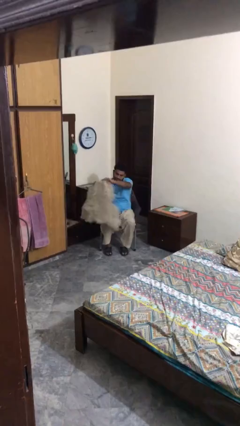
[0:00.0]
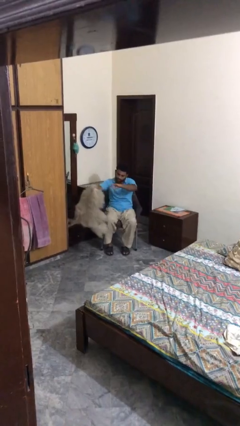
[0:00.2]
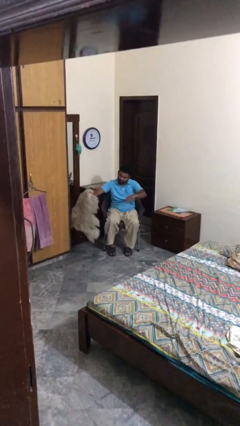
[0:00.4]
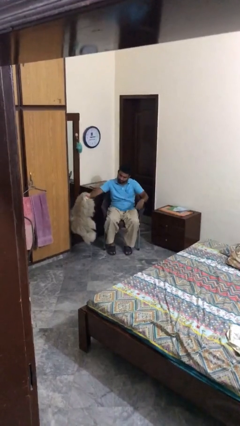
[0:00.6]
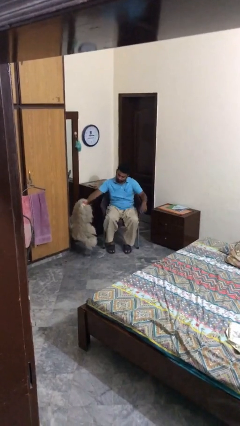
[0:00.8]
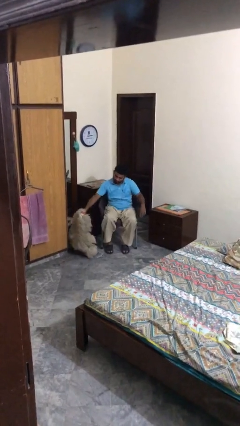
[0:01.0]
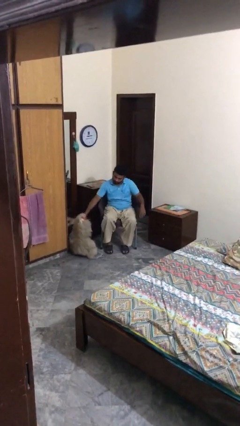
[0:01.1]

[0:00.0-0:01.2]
person puts down object on floor

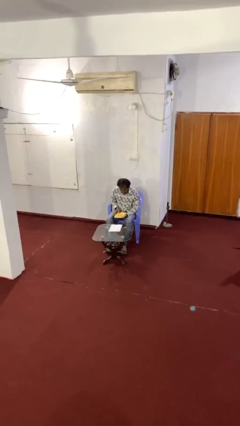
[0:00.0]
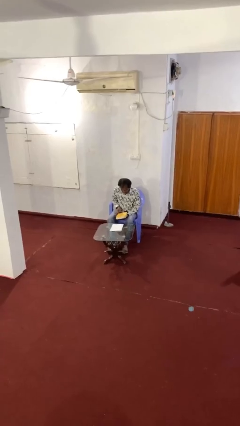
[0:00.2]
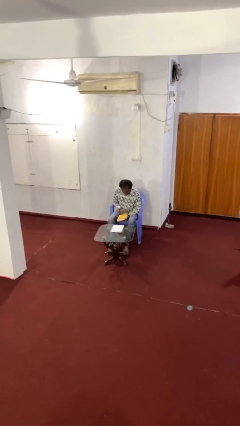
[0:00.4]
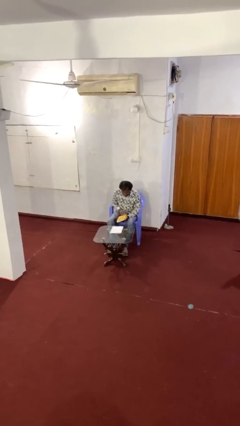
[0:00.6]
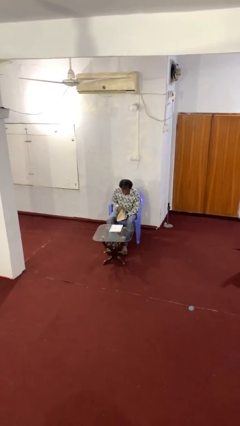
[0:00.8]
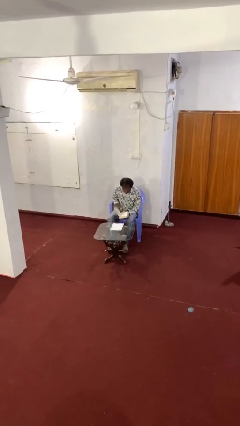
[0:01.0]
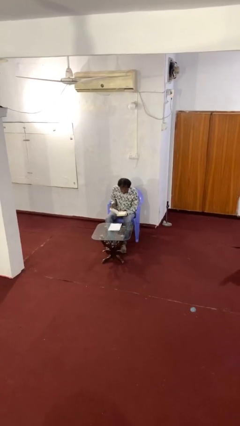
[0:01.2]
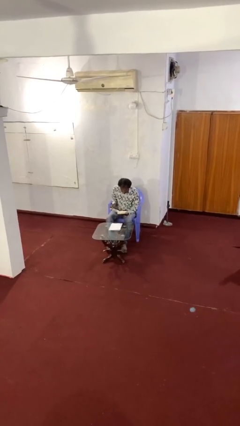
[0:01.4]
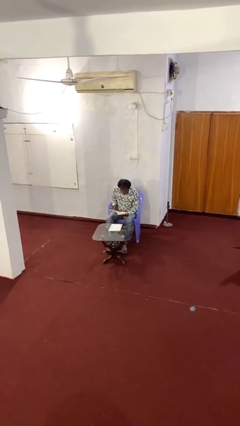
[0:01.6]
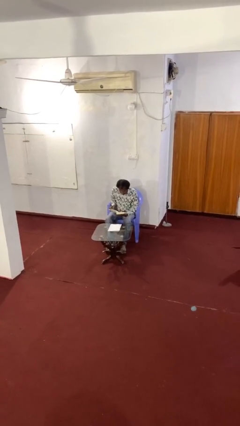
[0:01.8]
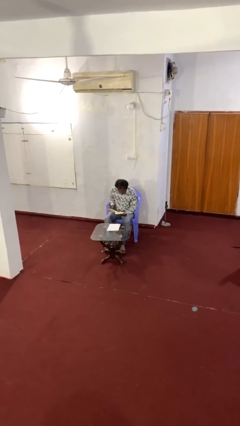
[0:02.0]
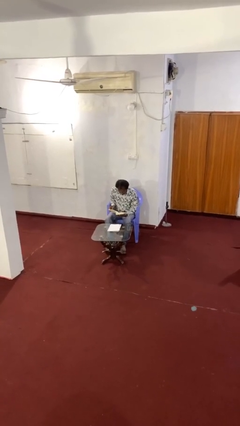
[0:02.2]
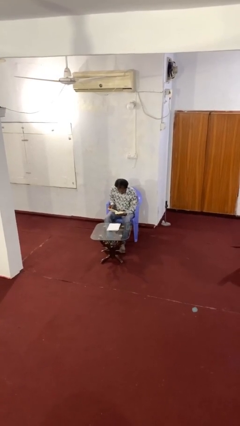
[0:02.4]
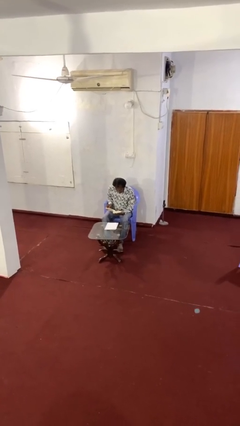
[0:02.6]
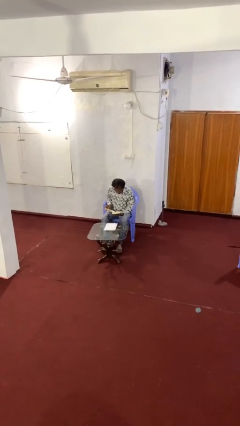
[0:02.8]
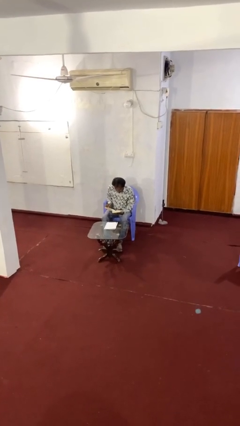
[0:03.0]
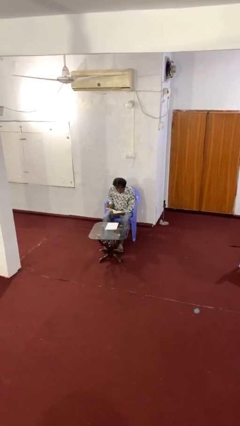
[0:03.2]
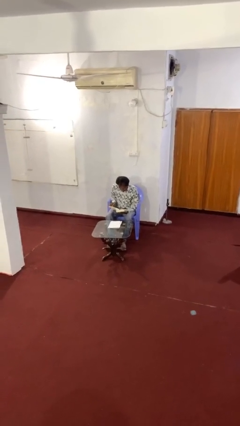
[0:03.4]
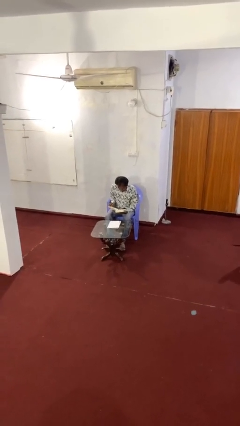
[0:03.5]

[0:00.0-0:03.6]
person reads document

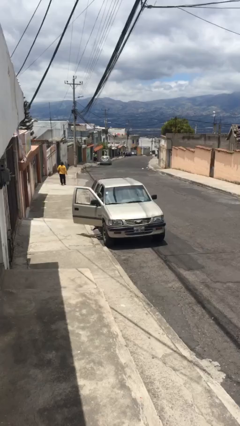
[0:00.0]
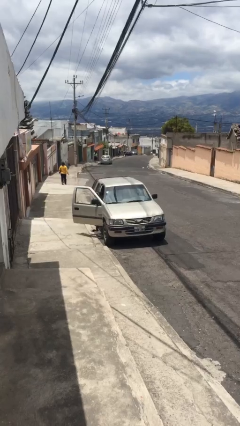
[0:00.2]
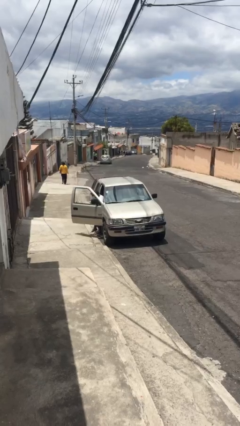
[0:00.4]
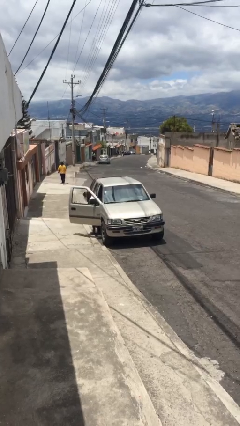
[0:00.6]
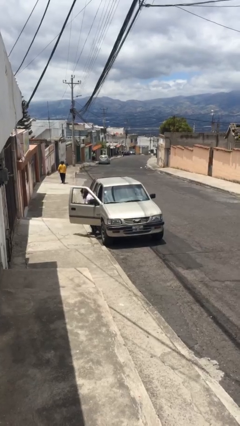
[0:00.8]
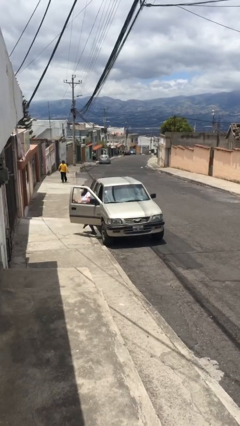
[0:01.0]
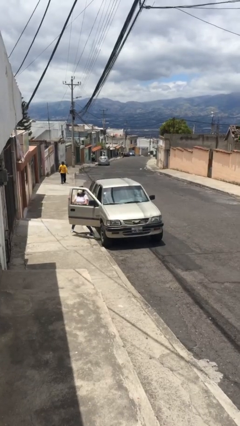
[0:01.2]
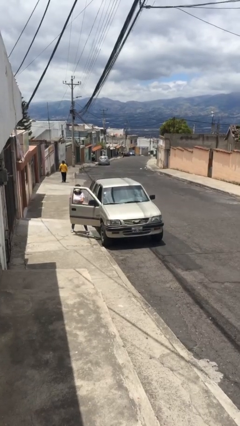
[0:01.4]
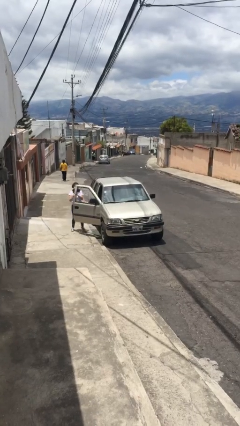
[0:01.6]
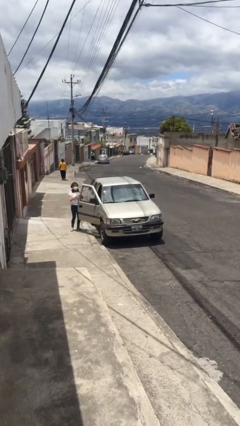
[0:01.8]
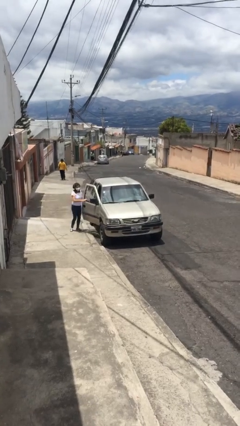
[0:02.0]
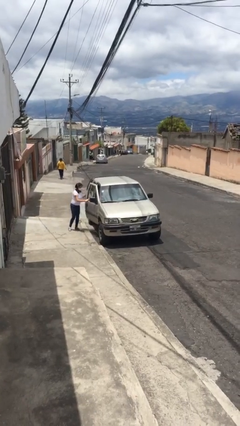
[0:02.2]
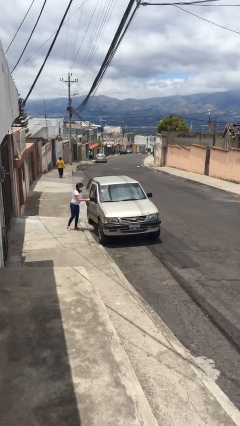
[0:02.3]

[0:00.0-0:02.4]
car drops off person

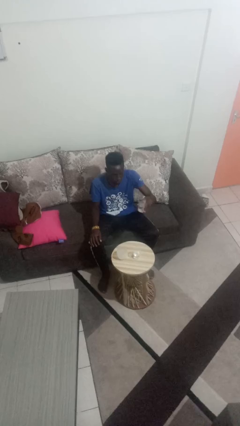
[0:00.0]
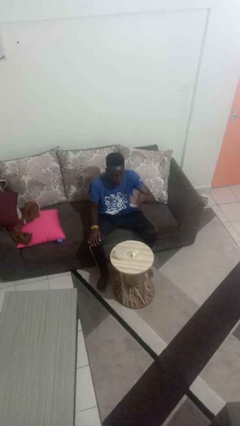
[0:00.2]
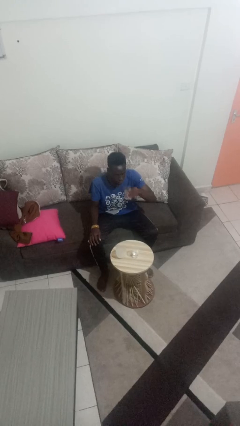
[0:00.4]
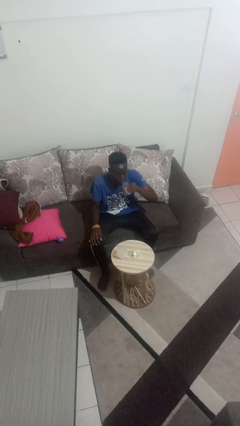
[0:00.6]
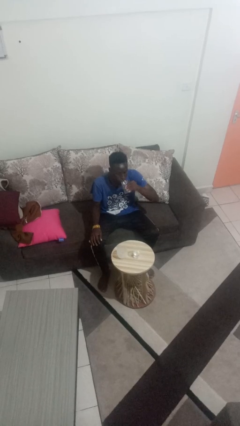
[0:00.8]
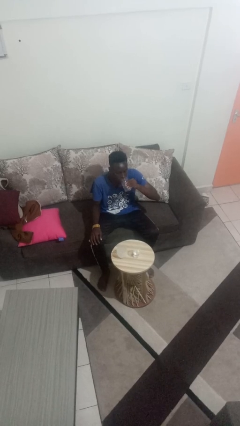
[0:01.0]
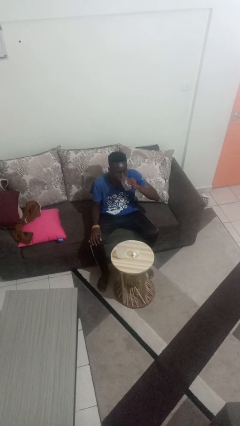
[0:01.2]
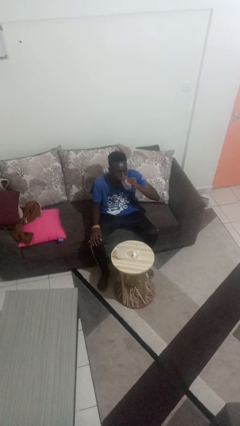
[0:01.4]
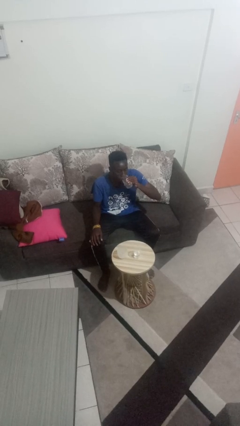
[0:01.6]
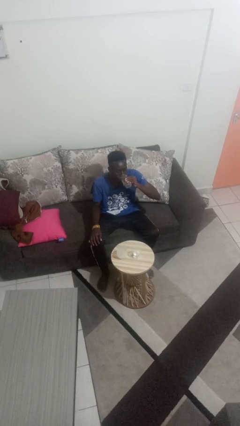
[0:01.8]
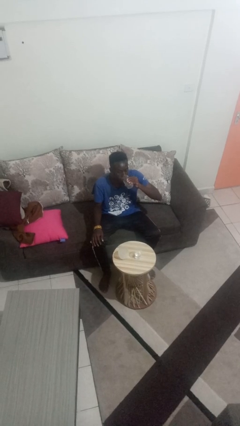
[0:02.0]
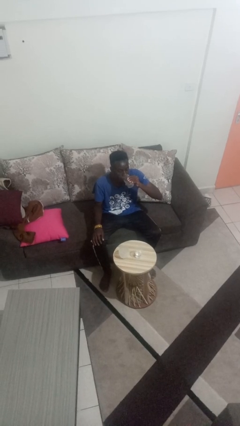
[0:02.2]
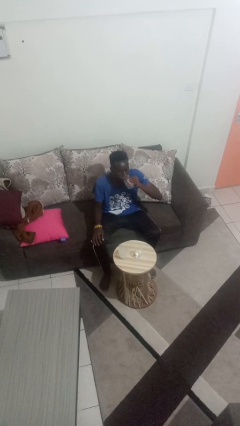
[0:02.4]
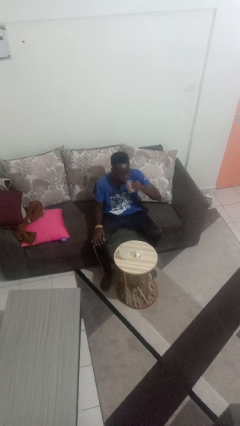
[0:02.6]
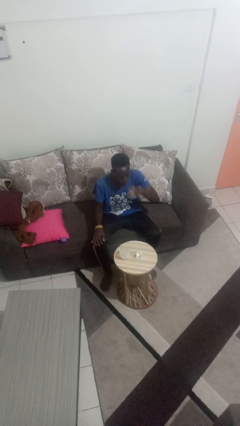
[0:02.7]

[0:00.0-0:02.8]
person drinks from shotglass

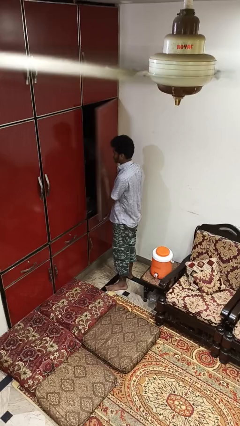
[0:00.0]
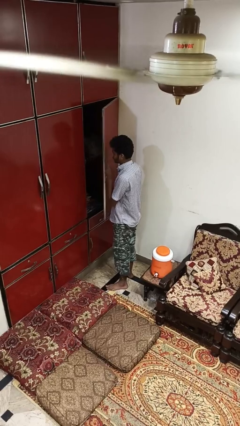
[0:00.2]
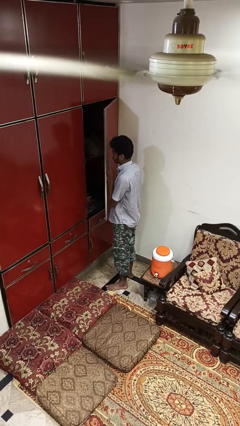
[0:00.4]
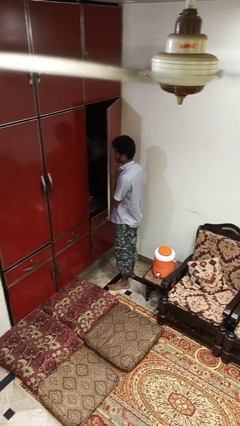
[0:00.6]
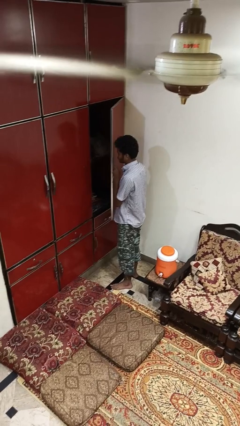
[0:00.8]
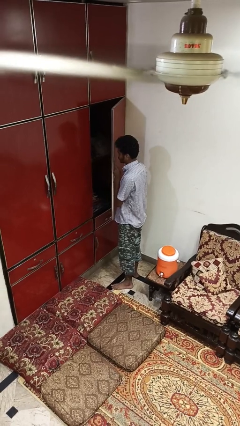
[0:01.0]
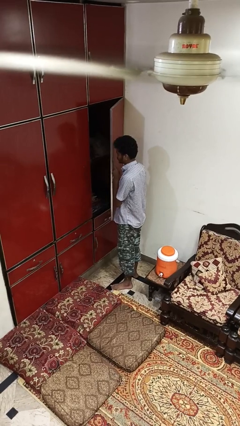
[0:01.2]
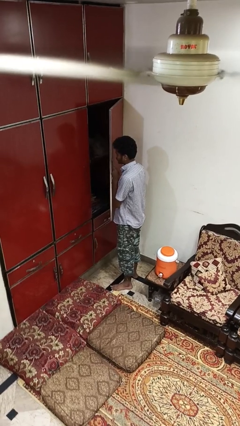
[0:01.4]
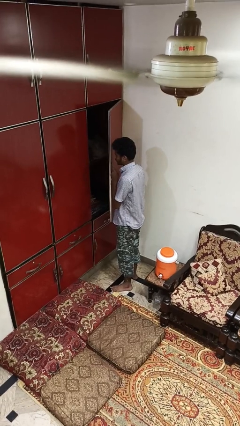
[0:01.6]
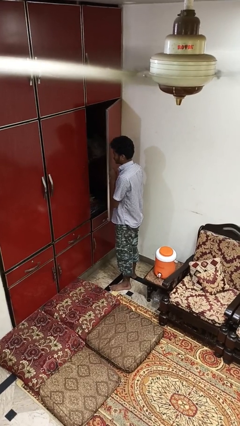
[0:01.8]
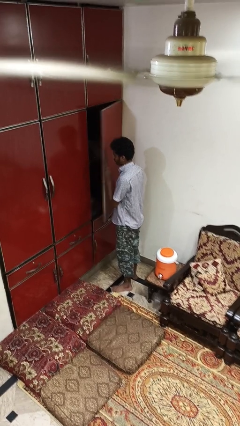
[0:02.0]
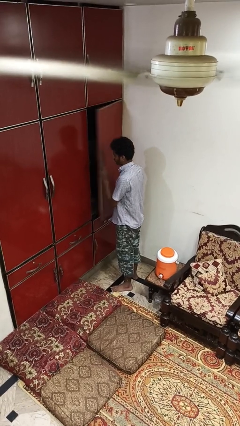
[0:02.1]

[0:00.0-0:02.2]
person closes cabinet

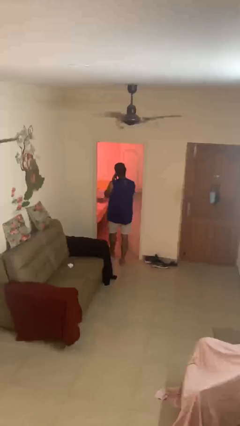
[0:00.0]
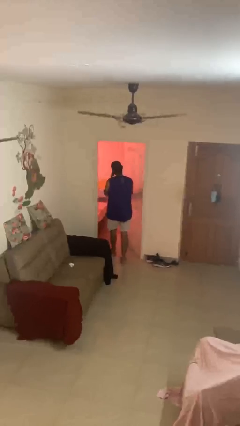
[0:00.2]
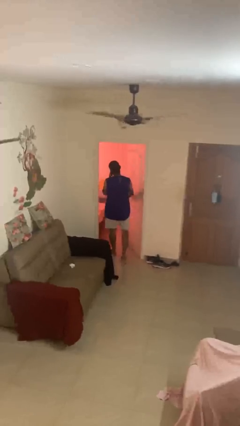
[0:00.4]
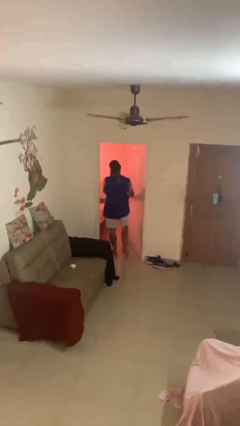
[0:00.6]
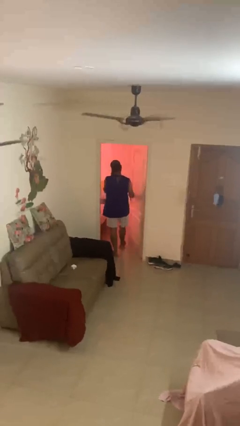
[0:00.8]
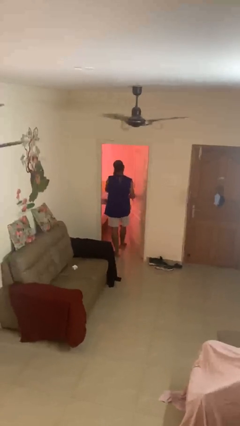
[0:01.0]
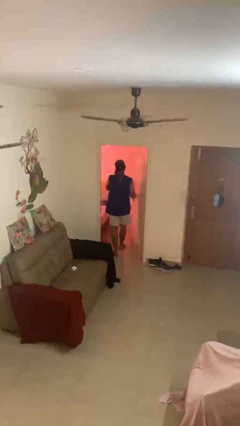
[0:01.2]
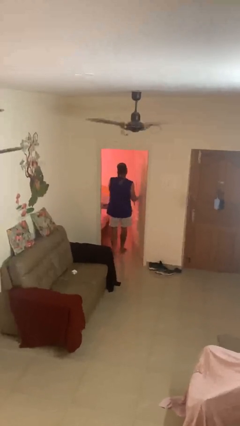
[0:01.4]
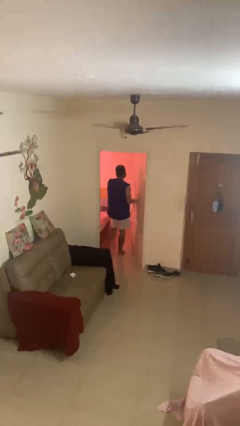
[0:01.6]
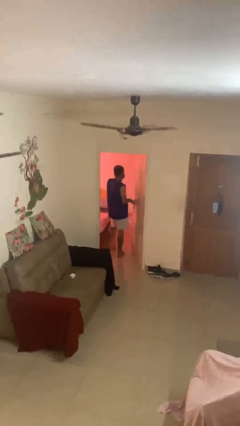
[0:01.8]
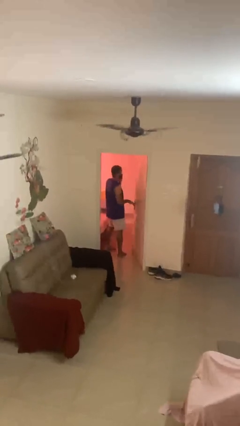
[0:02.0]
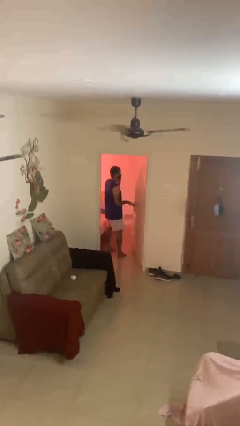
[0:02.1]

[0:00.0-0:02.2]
person exits scene through structure

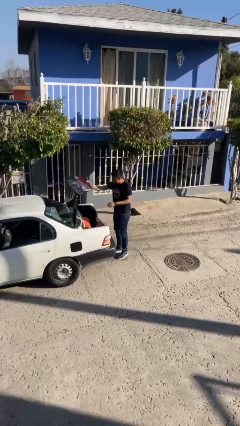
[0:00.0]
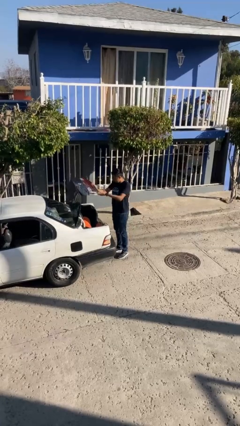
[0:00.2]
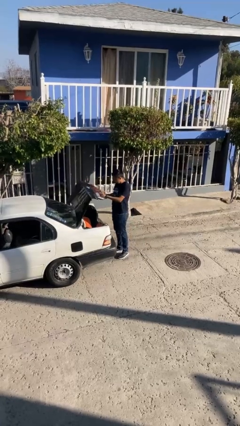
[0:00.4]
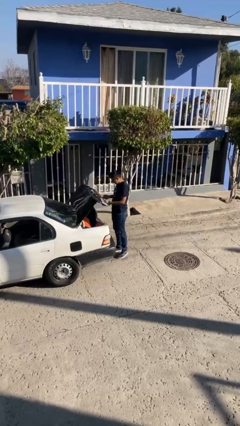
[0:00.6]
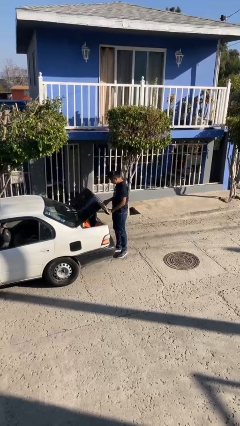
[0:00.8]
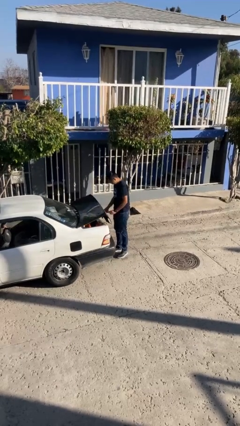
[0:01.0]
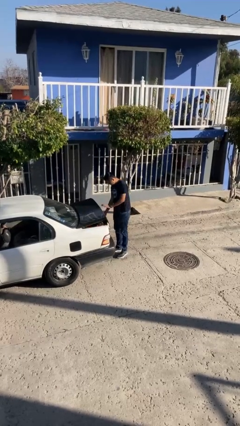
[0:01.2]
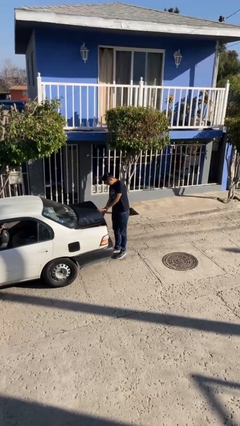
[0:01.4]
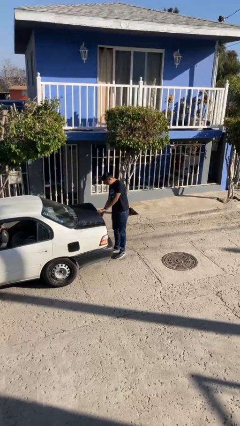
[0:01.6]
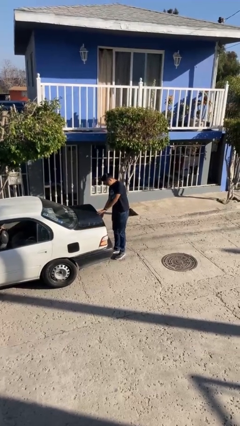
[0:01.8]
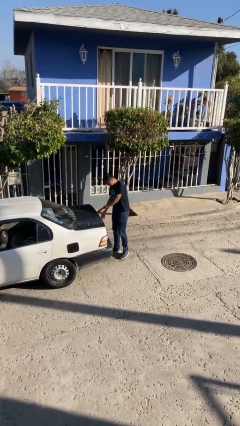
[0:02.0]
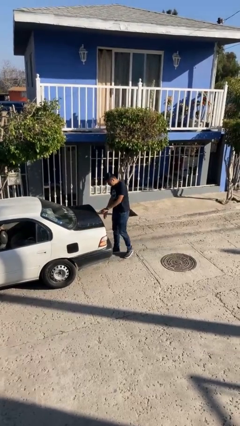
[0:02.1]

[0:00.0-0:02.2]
person closes car trunk

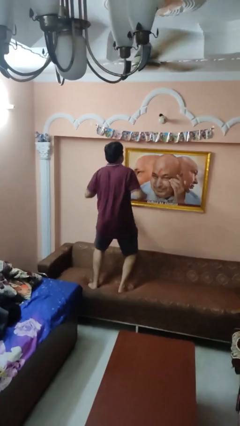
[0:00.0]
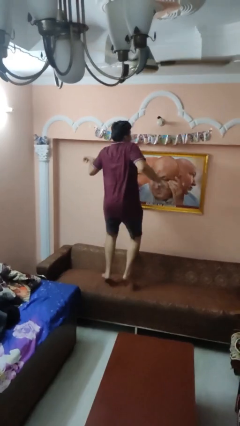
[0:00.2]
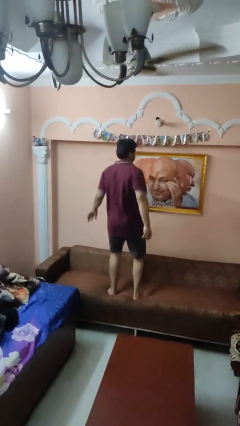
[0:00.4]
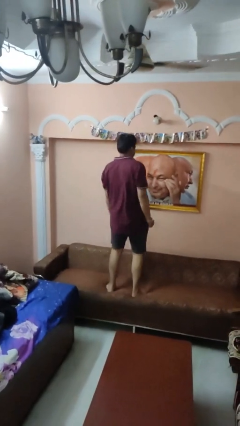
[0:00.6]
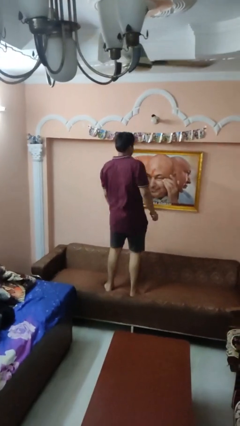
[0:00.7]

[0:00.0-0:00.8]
person jumps on couch
